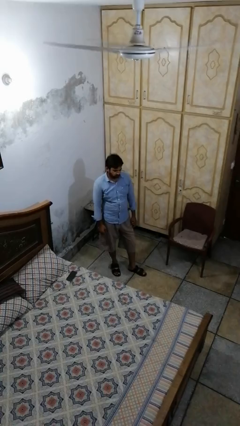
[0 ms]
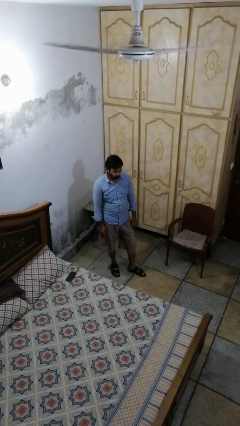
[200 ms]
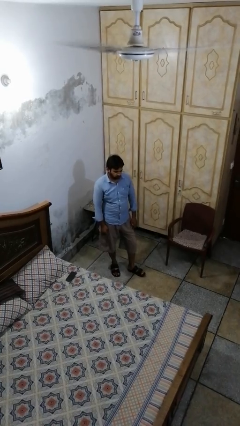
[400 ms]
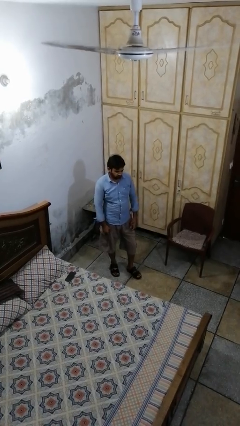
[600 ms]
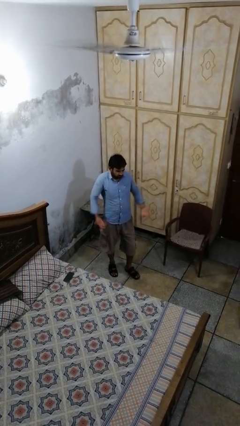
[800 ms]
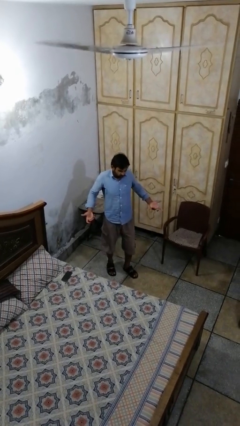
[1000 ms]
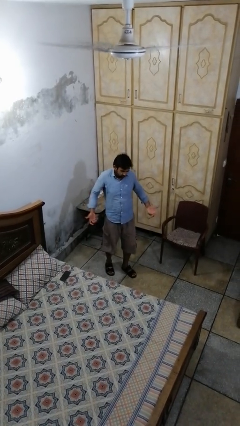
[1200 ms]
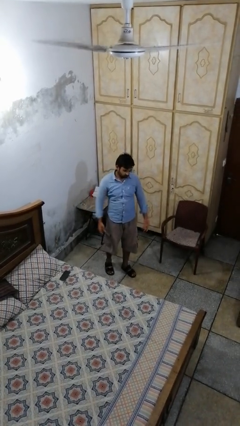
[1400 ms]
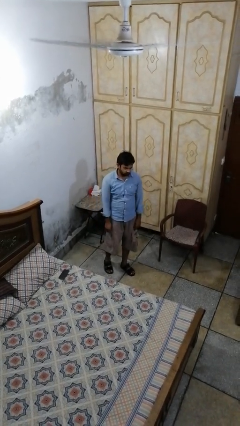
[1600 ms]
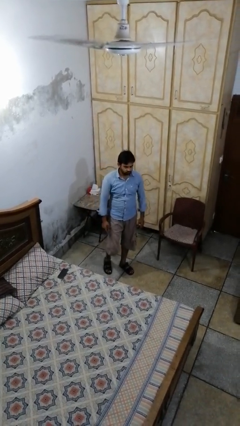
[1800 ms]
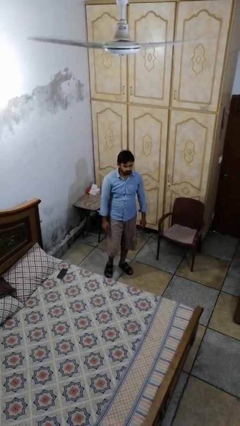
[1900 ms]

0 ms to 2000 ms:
person shrugs

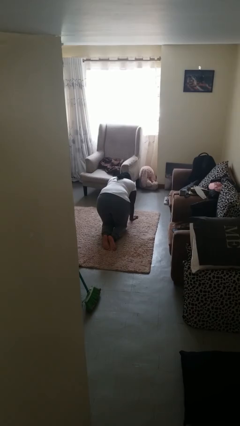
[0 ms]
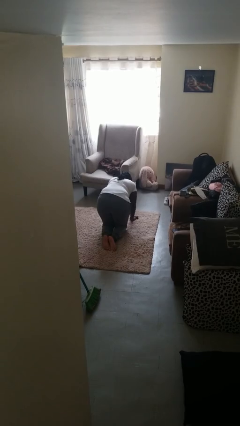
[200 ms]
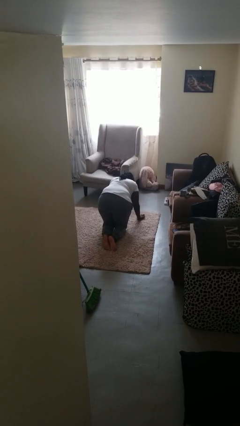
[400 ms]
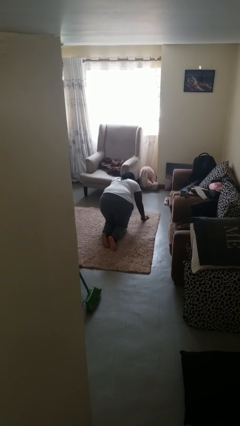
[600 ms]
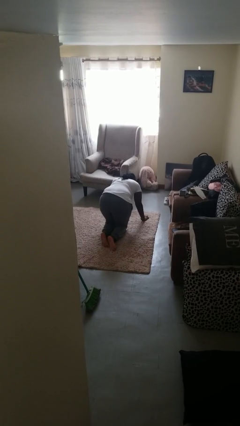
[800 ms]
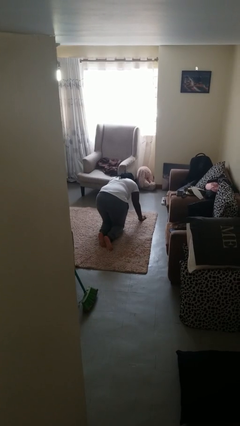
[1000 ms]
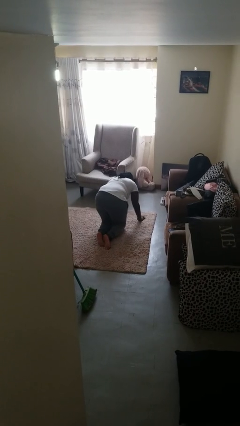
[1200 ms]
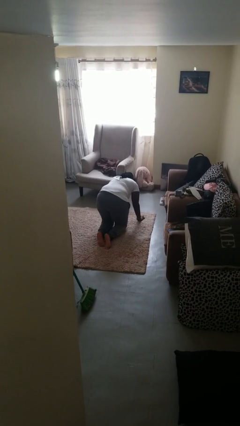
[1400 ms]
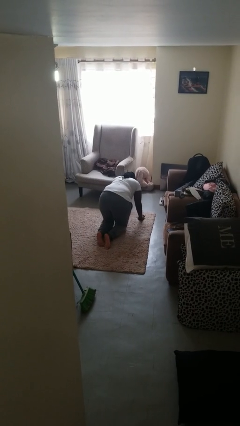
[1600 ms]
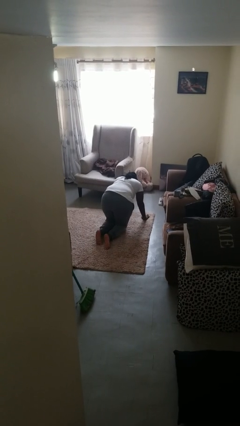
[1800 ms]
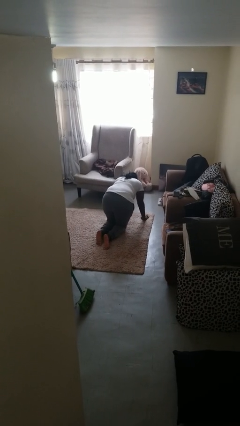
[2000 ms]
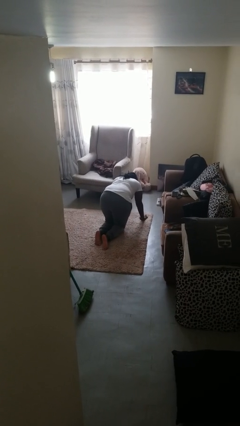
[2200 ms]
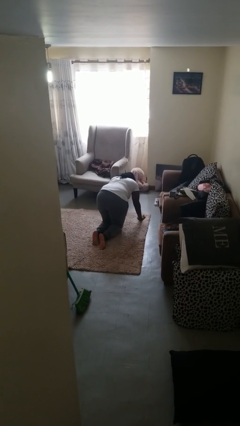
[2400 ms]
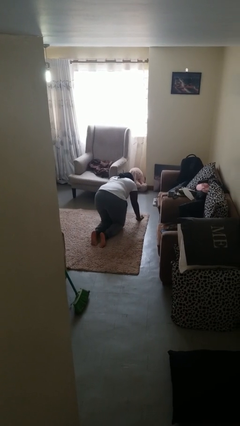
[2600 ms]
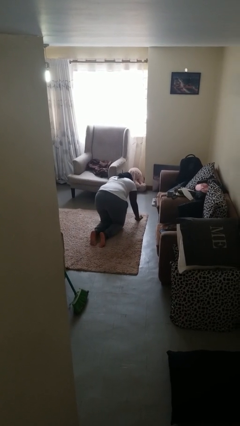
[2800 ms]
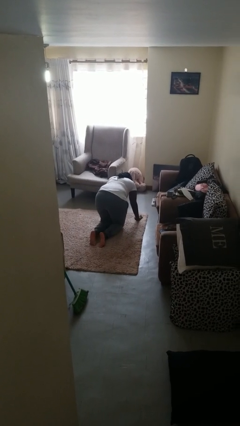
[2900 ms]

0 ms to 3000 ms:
person crawls

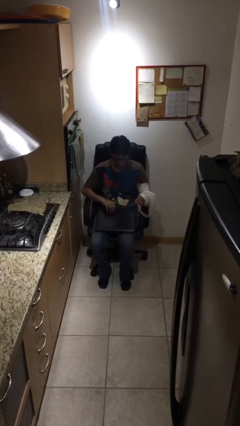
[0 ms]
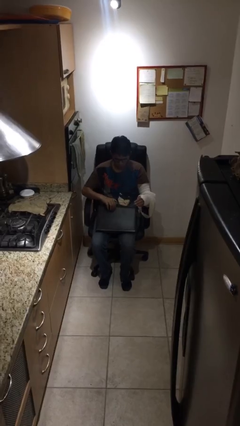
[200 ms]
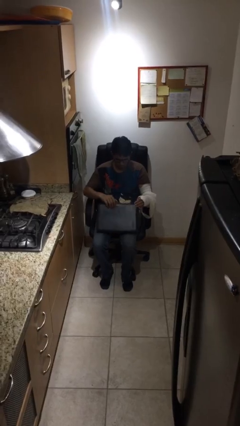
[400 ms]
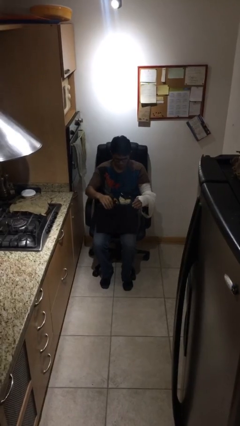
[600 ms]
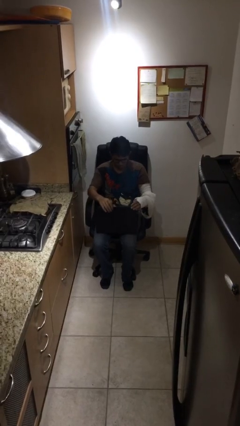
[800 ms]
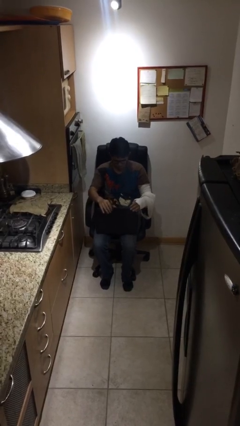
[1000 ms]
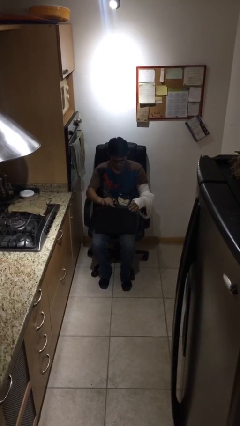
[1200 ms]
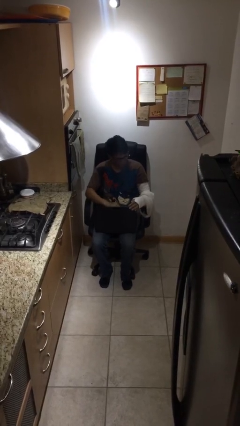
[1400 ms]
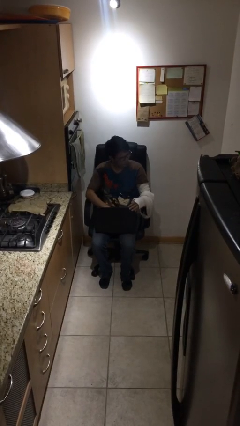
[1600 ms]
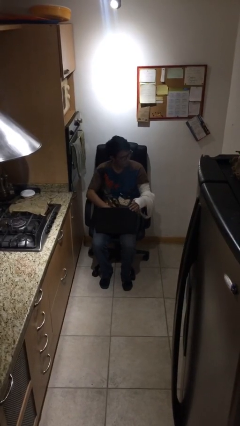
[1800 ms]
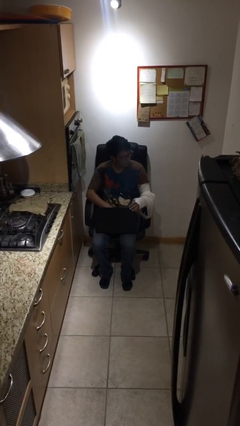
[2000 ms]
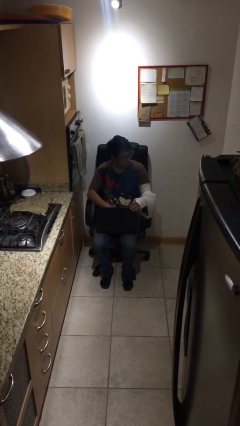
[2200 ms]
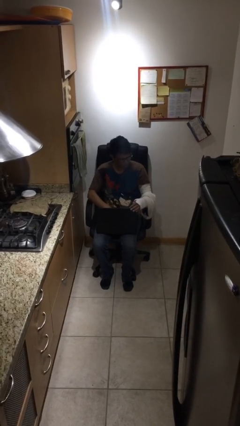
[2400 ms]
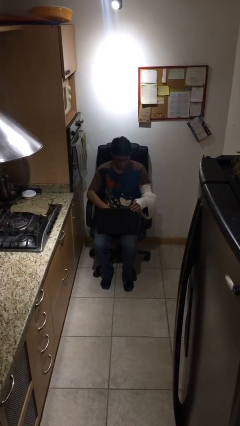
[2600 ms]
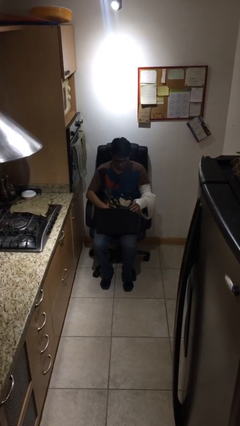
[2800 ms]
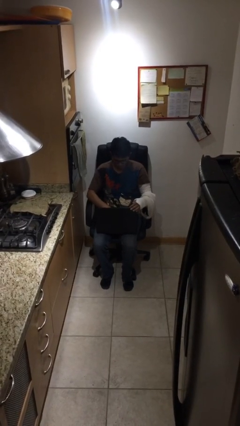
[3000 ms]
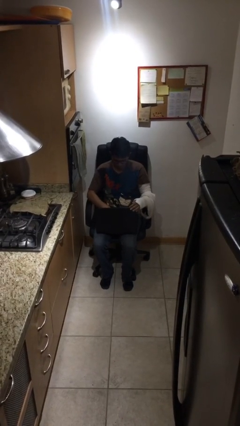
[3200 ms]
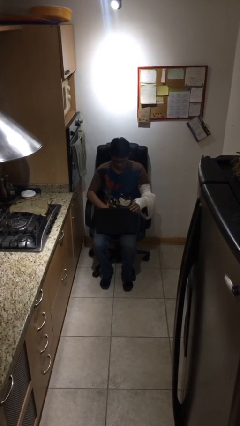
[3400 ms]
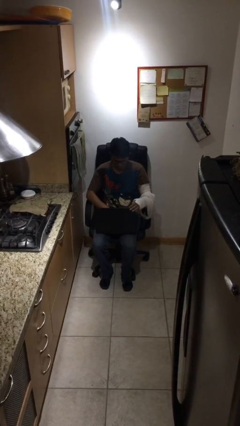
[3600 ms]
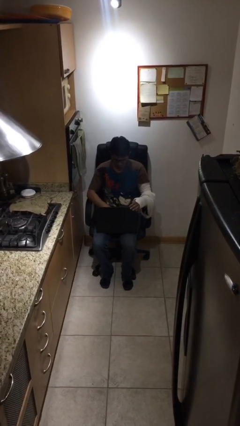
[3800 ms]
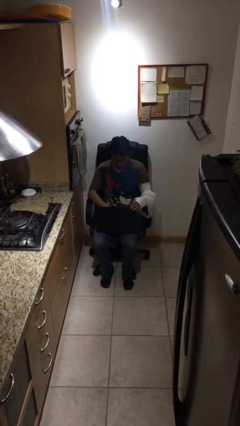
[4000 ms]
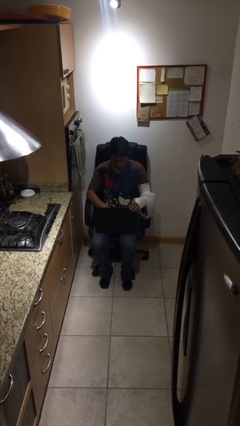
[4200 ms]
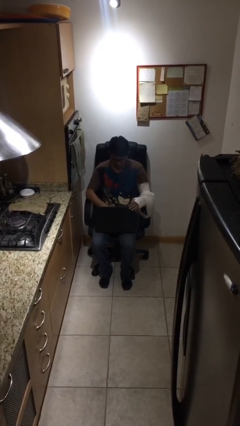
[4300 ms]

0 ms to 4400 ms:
person interacts with laptop

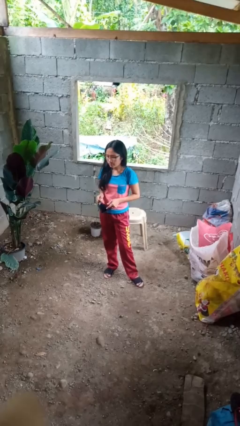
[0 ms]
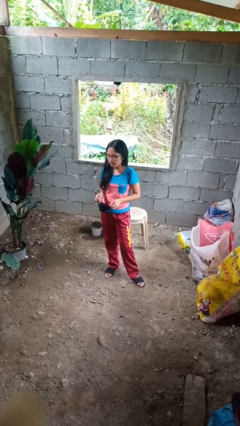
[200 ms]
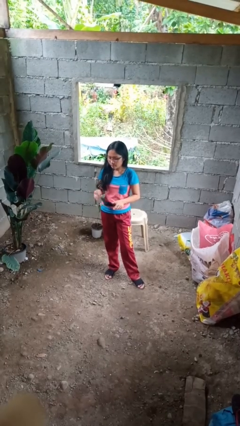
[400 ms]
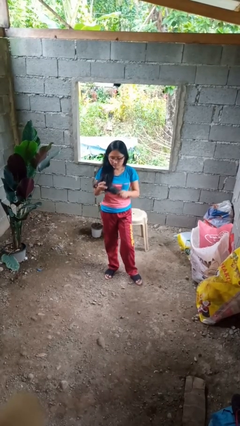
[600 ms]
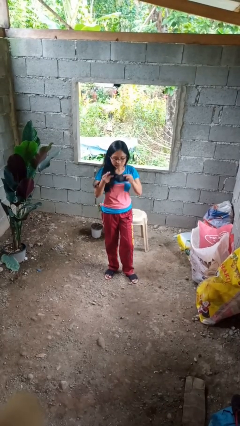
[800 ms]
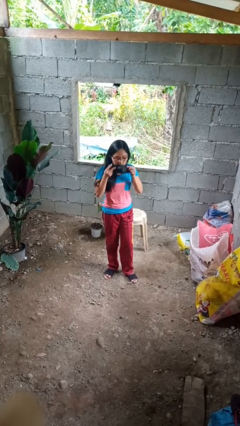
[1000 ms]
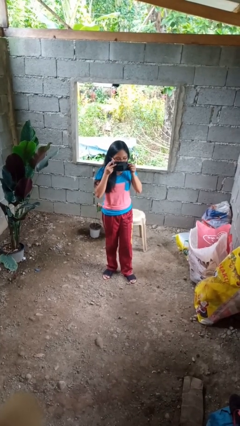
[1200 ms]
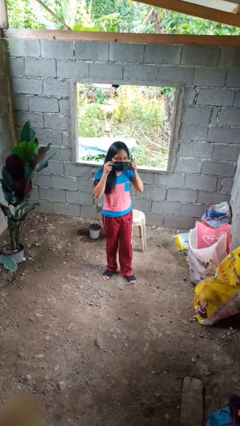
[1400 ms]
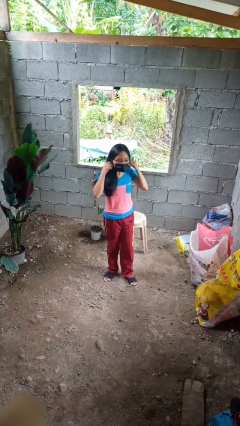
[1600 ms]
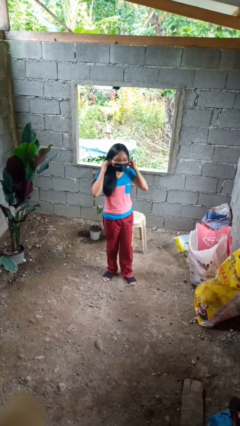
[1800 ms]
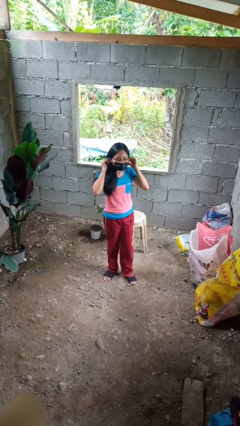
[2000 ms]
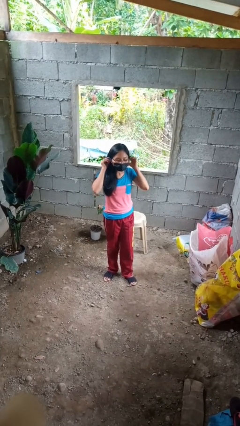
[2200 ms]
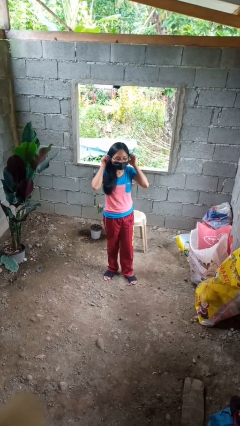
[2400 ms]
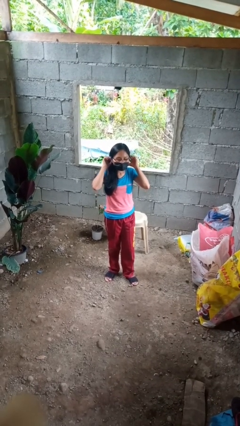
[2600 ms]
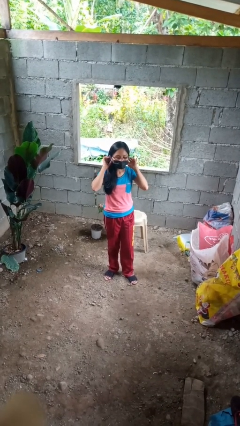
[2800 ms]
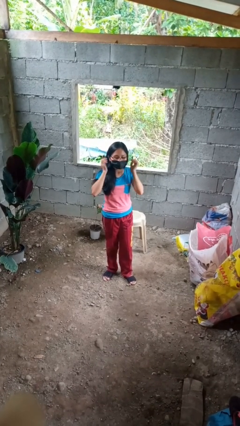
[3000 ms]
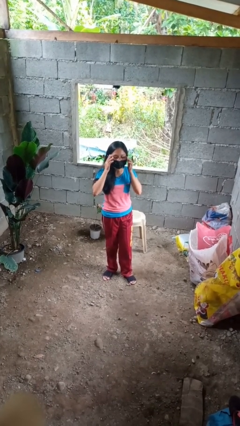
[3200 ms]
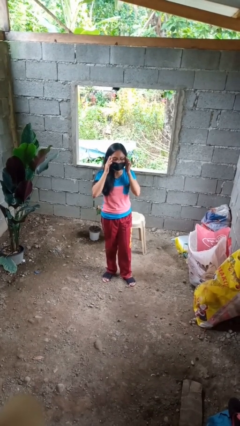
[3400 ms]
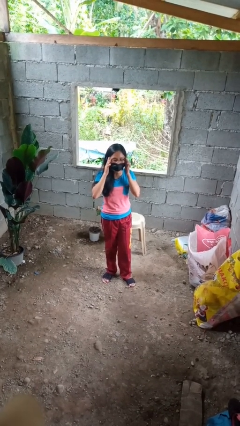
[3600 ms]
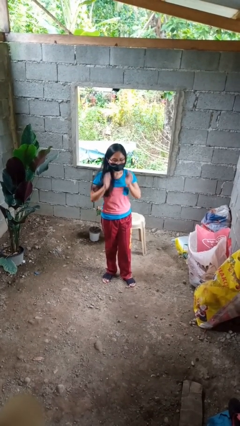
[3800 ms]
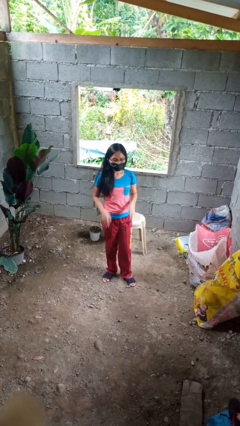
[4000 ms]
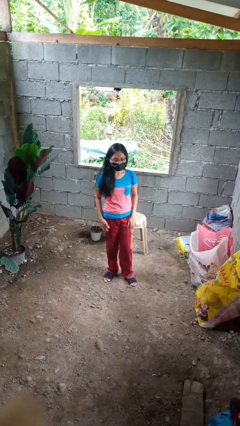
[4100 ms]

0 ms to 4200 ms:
person puts on facemask

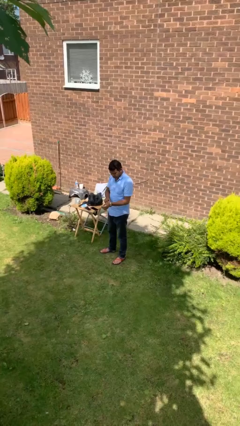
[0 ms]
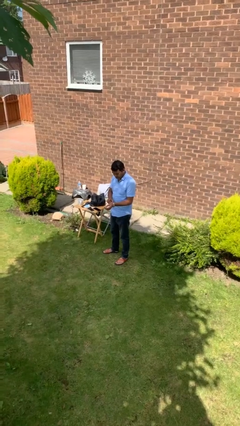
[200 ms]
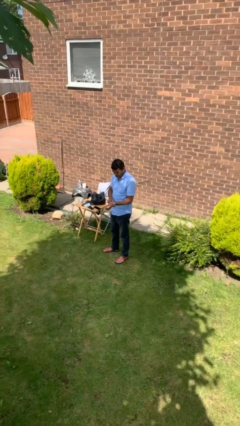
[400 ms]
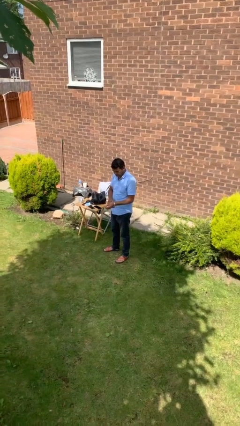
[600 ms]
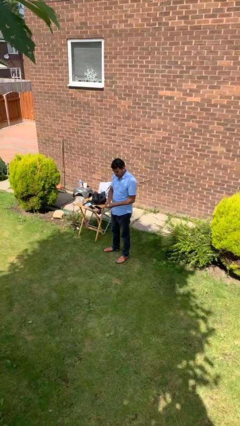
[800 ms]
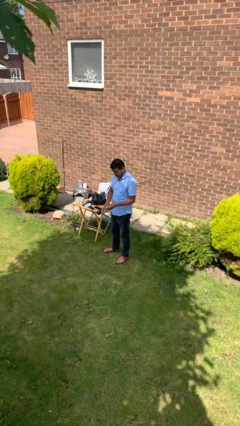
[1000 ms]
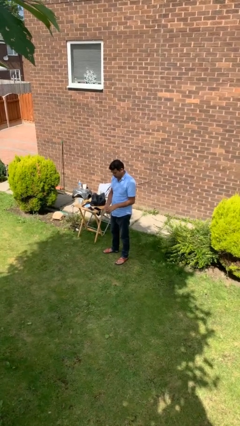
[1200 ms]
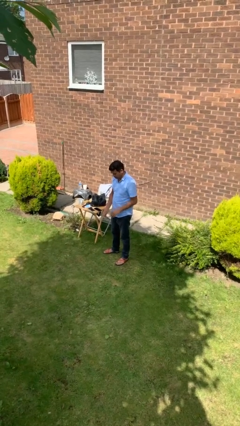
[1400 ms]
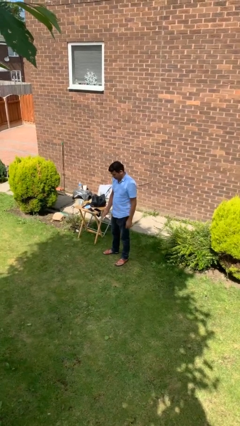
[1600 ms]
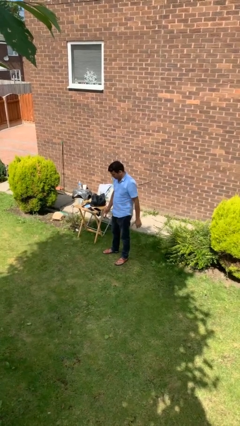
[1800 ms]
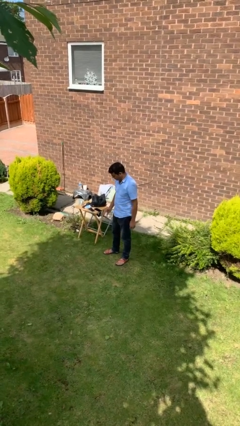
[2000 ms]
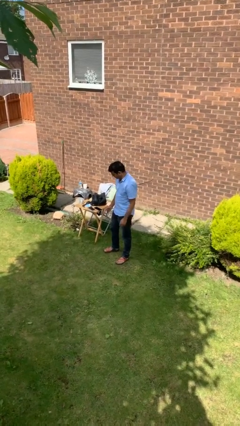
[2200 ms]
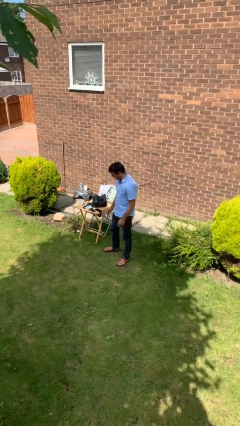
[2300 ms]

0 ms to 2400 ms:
person takes off wristwatch

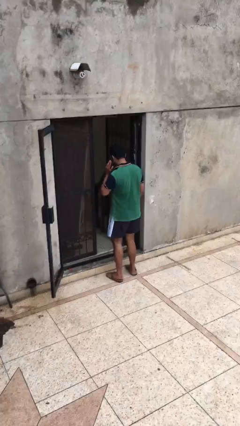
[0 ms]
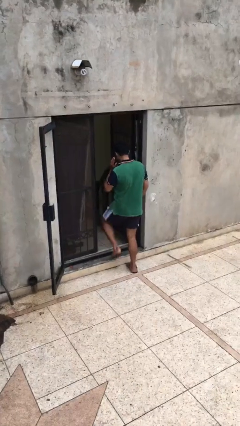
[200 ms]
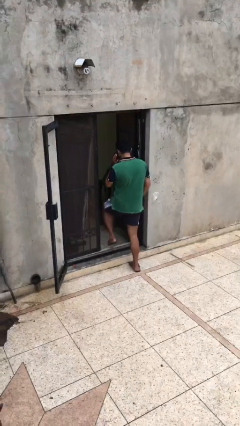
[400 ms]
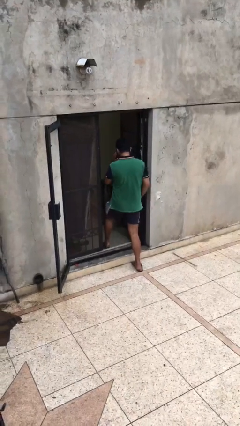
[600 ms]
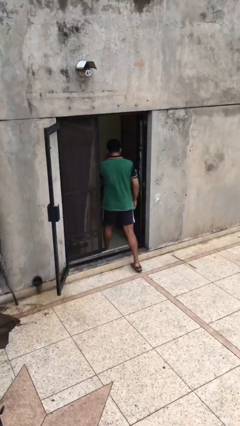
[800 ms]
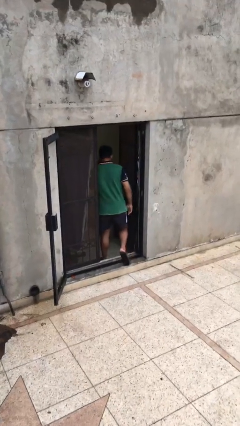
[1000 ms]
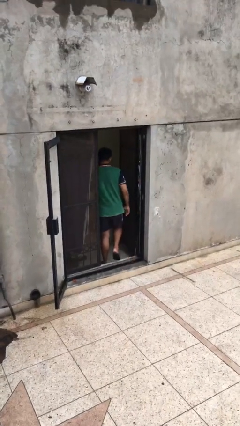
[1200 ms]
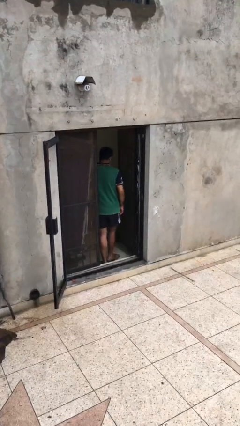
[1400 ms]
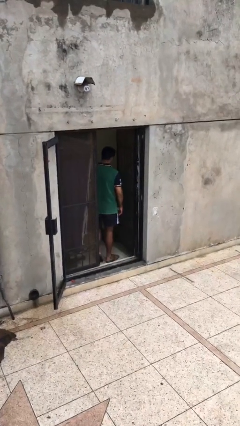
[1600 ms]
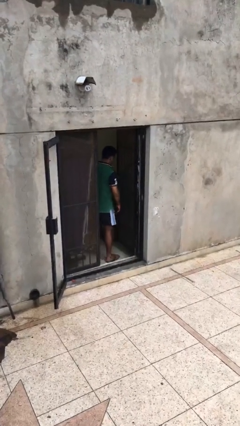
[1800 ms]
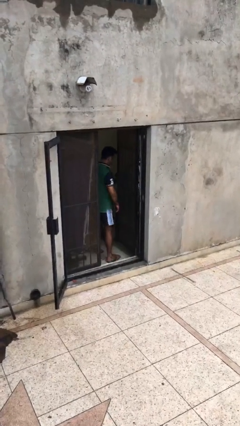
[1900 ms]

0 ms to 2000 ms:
person exits scene through structure
